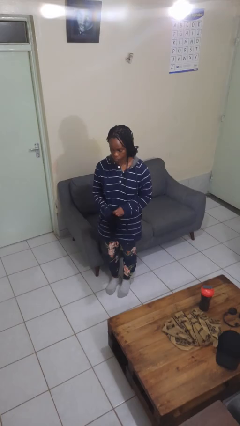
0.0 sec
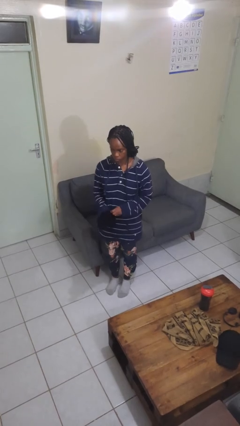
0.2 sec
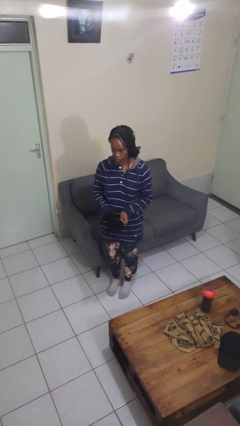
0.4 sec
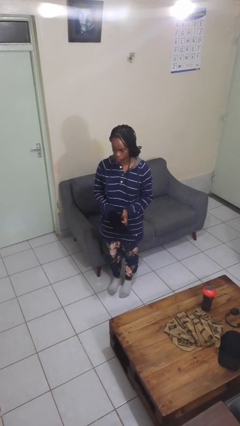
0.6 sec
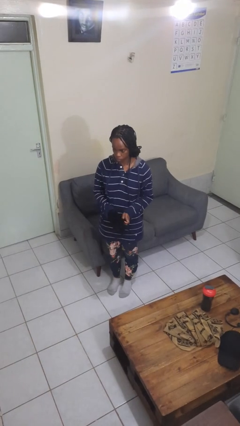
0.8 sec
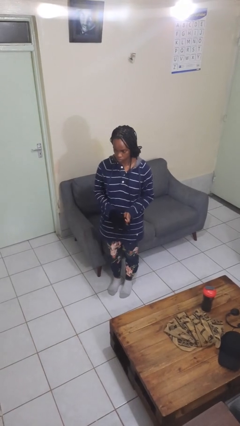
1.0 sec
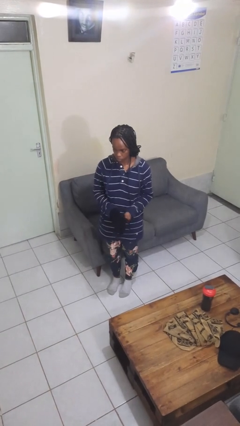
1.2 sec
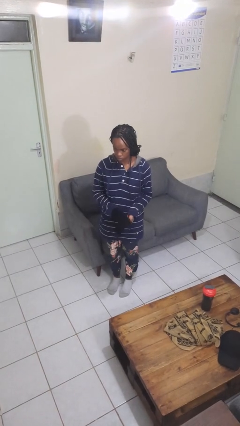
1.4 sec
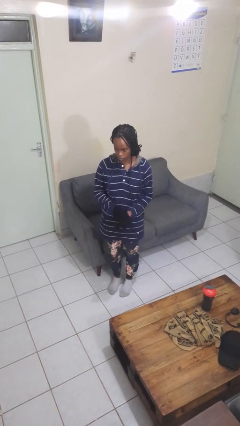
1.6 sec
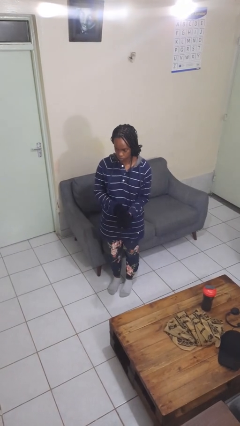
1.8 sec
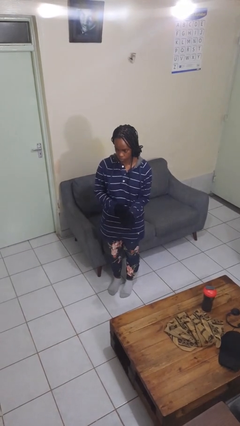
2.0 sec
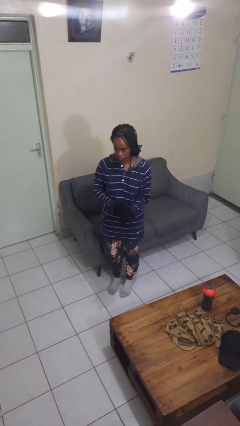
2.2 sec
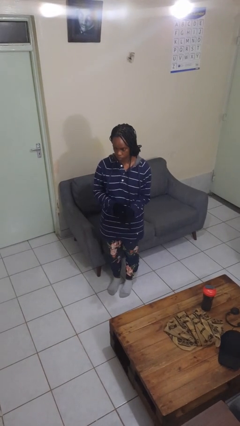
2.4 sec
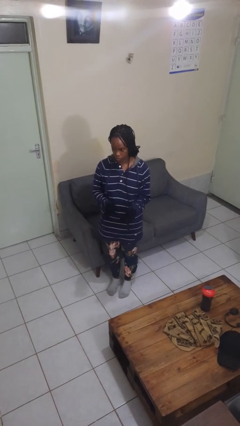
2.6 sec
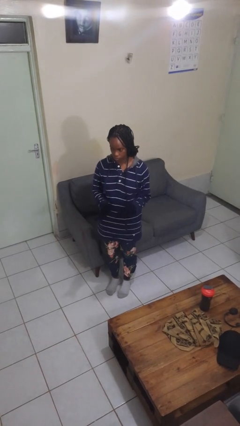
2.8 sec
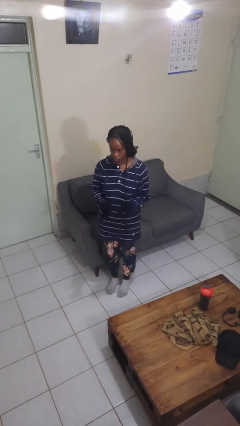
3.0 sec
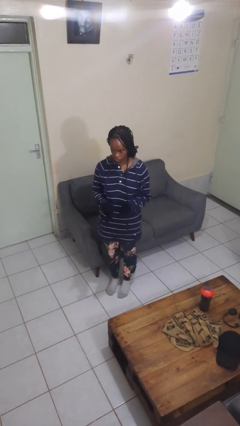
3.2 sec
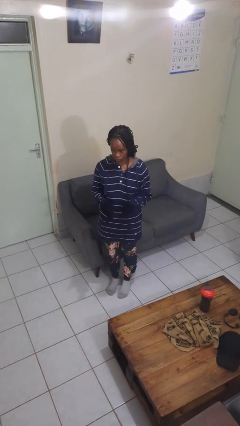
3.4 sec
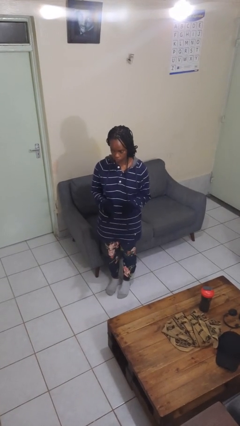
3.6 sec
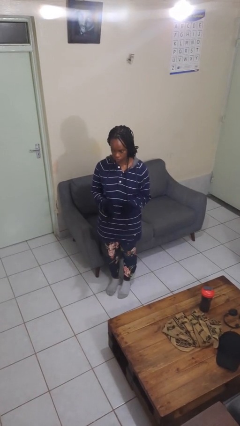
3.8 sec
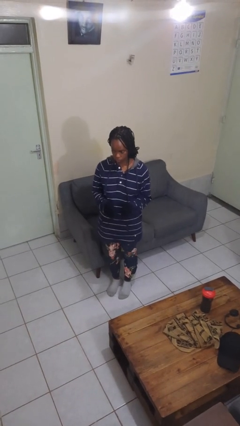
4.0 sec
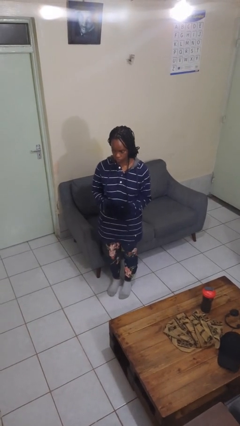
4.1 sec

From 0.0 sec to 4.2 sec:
person puts on gloves

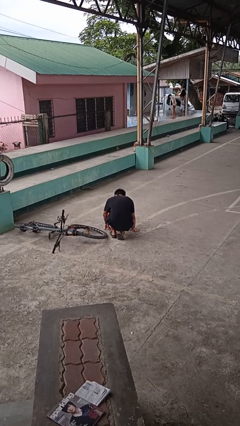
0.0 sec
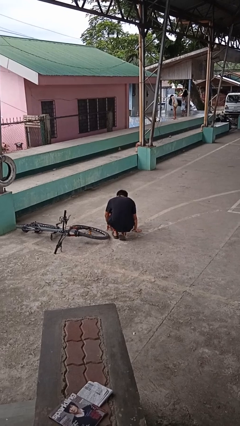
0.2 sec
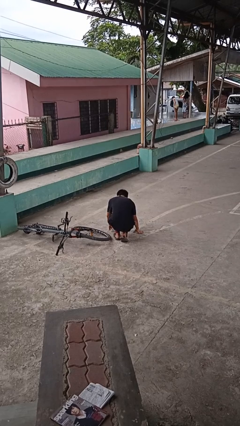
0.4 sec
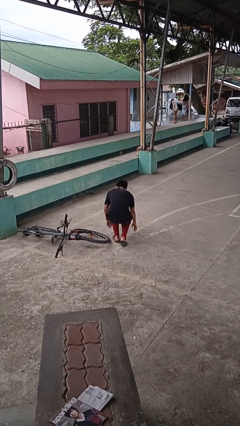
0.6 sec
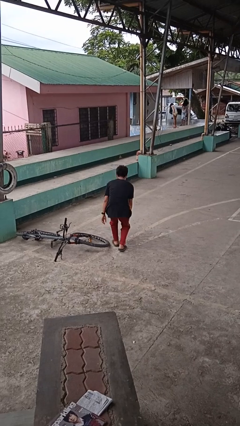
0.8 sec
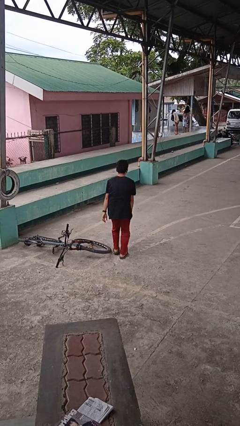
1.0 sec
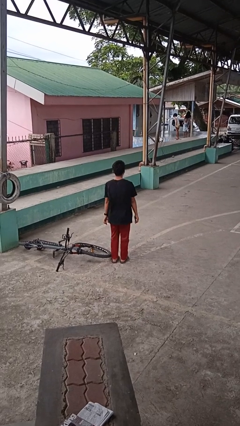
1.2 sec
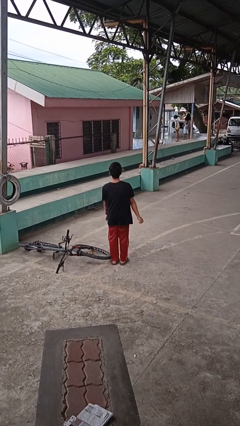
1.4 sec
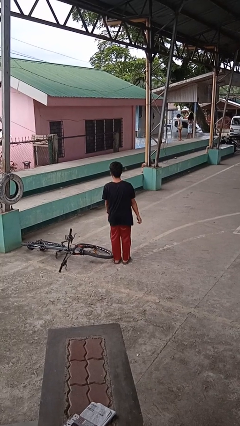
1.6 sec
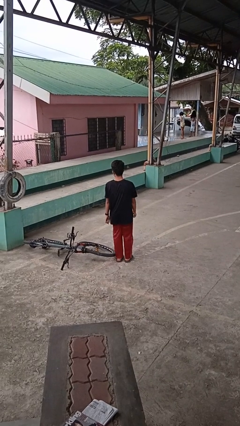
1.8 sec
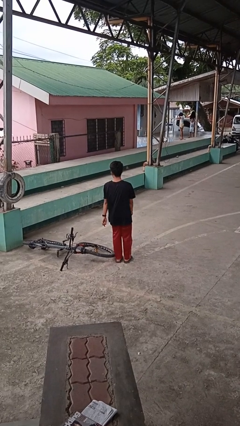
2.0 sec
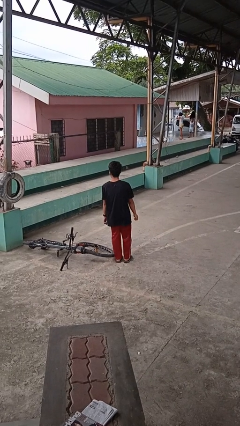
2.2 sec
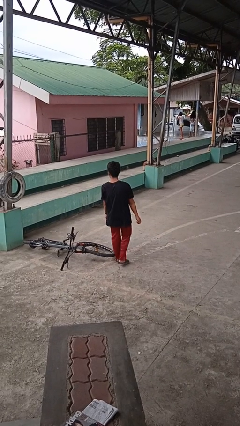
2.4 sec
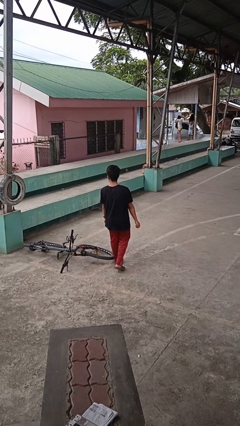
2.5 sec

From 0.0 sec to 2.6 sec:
person stands up from floor

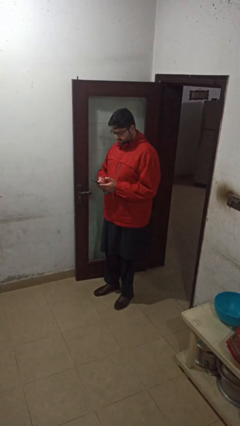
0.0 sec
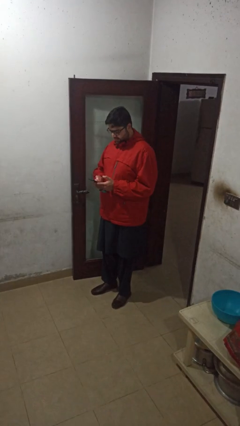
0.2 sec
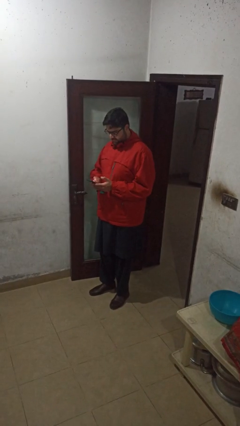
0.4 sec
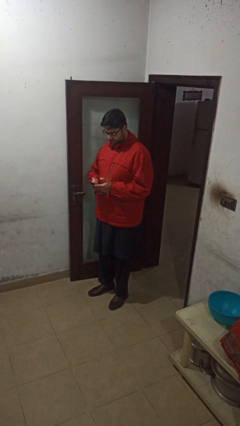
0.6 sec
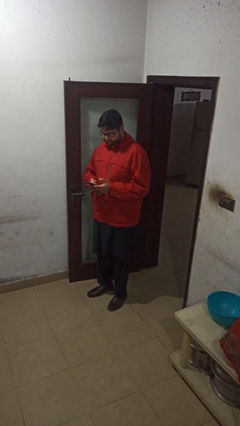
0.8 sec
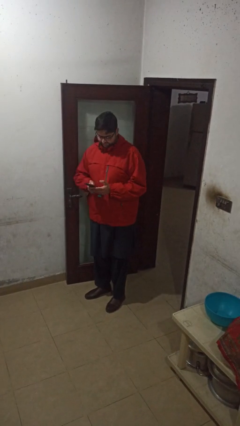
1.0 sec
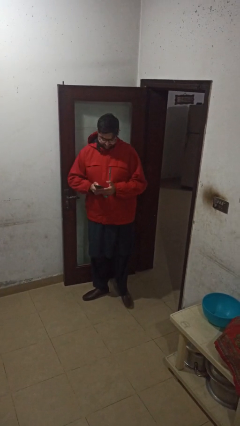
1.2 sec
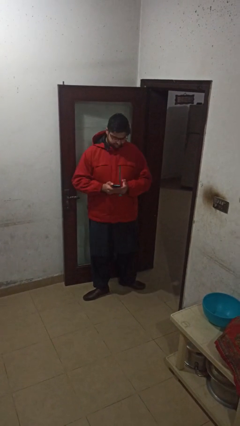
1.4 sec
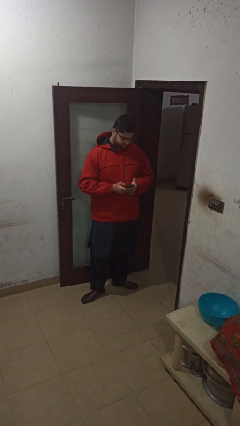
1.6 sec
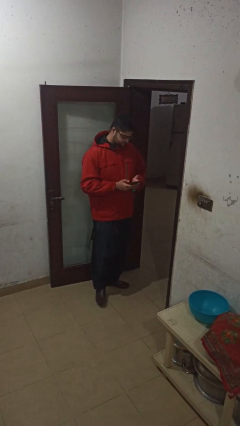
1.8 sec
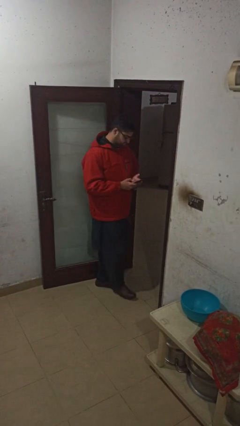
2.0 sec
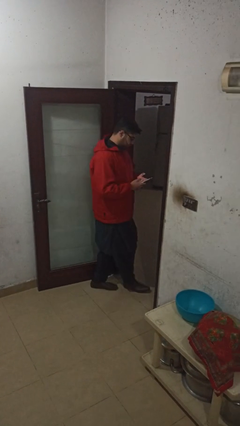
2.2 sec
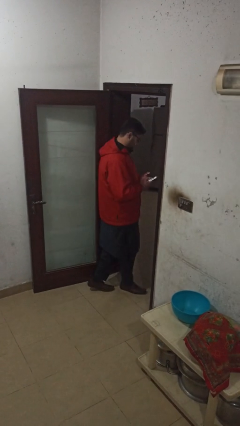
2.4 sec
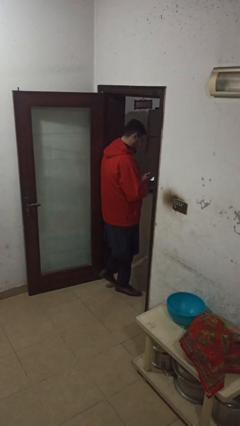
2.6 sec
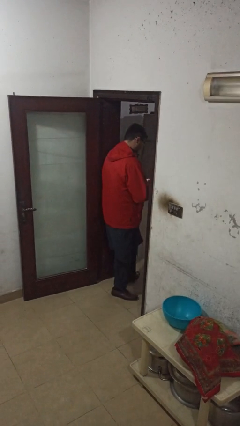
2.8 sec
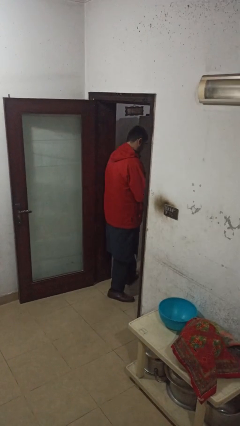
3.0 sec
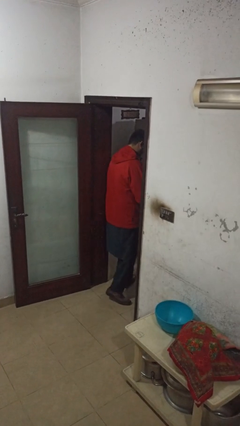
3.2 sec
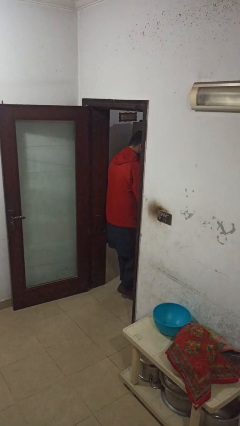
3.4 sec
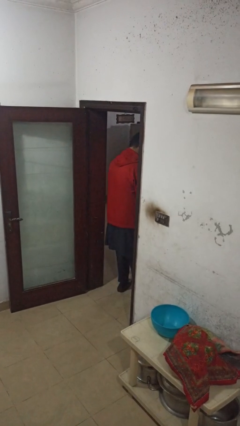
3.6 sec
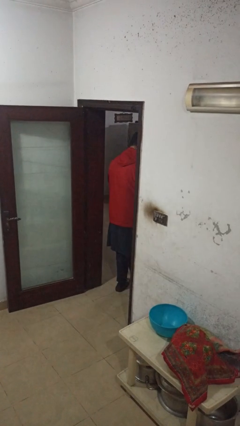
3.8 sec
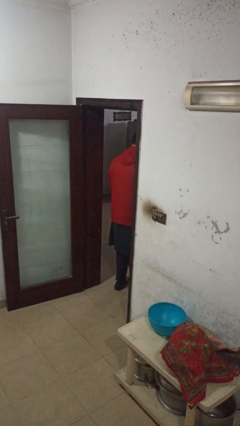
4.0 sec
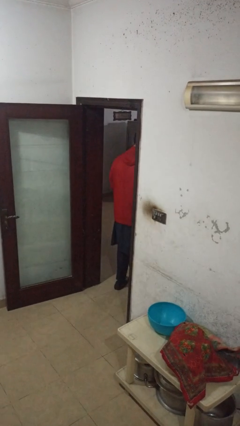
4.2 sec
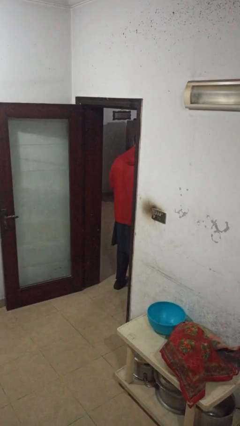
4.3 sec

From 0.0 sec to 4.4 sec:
person exits scene through structure

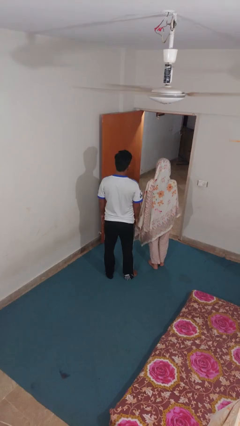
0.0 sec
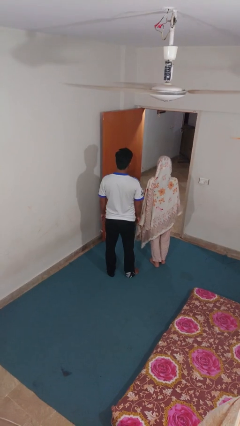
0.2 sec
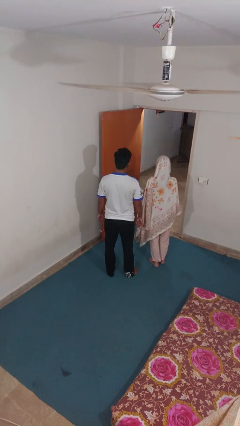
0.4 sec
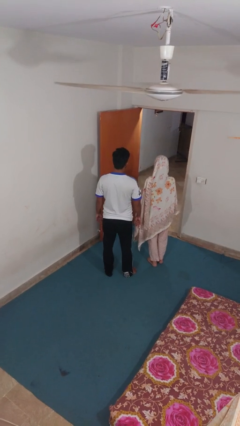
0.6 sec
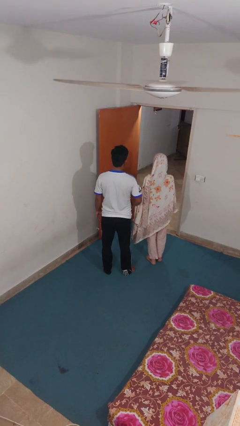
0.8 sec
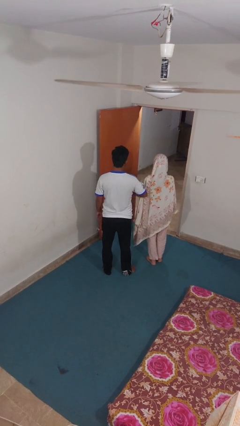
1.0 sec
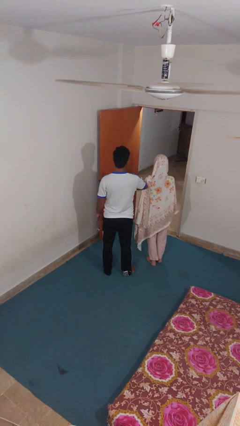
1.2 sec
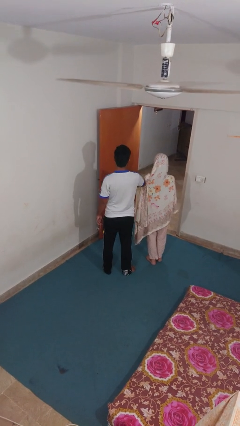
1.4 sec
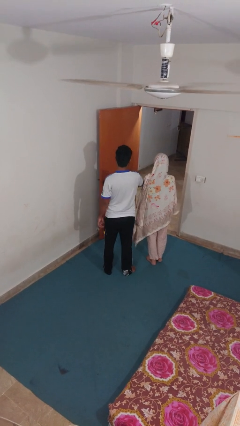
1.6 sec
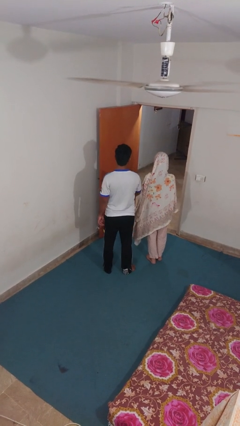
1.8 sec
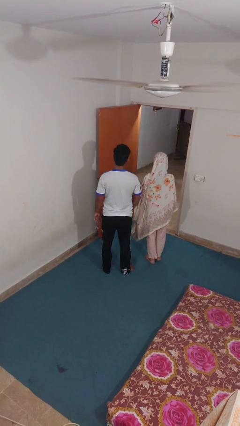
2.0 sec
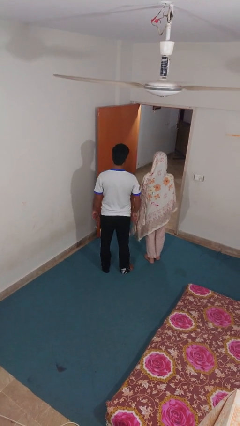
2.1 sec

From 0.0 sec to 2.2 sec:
person nudges person with elbow

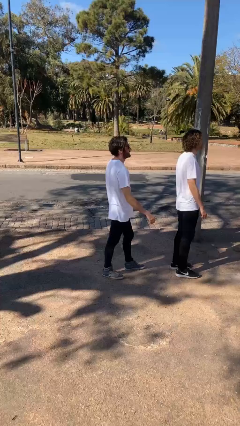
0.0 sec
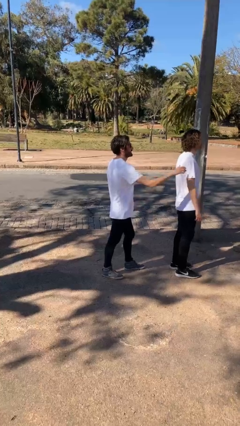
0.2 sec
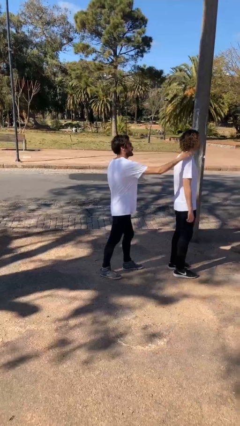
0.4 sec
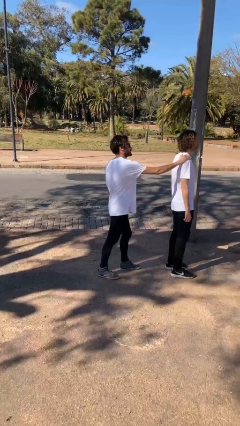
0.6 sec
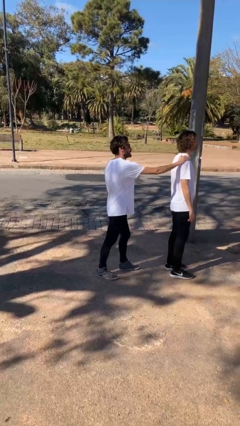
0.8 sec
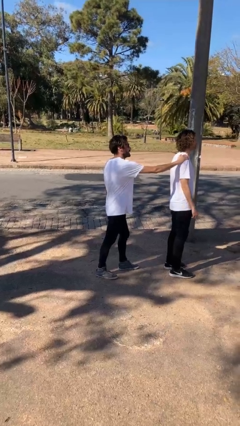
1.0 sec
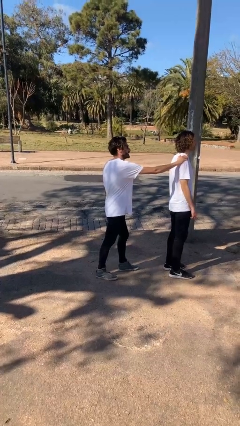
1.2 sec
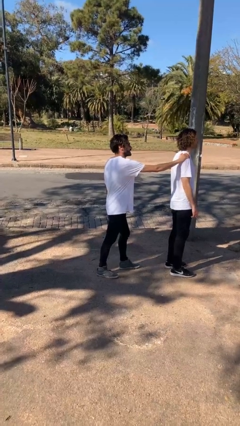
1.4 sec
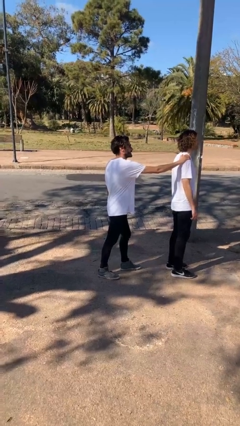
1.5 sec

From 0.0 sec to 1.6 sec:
person grabs person by shoulder

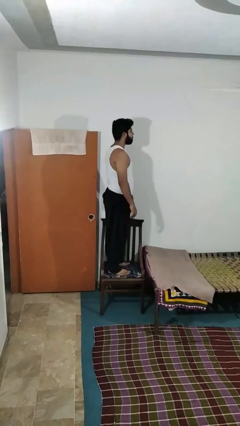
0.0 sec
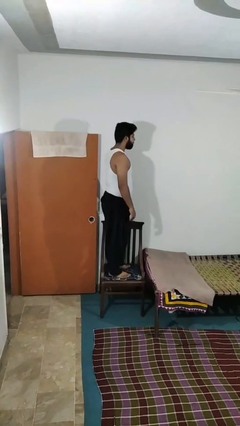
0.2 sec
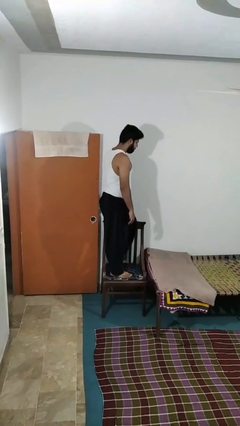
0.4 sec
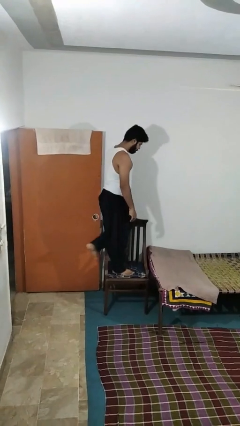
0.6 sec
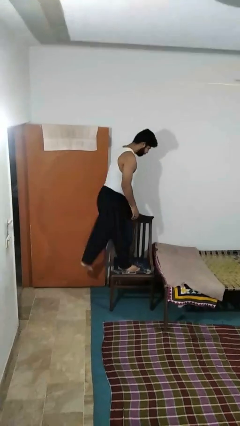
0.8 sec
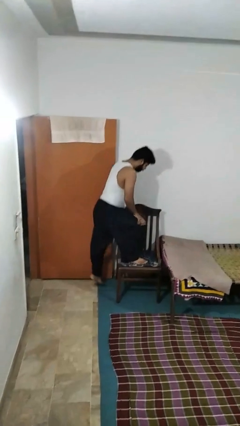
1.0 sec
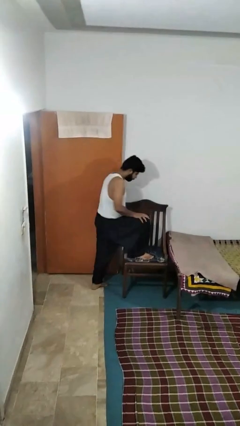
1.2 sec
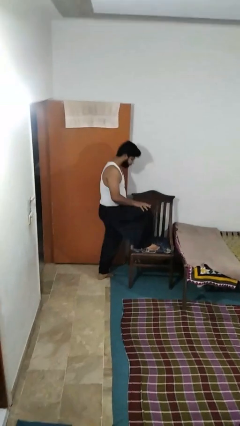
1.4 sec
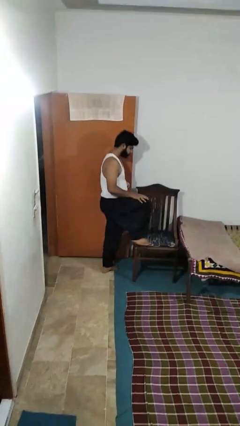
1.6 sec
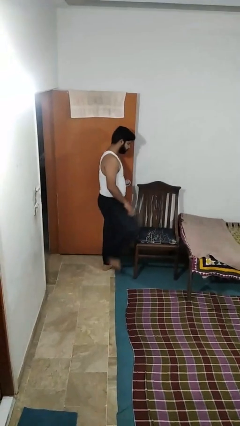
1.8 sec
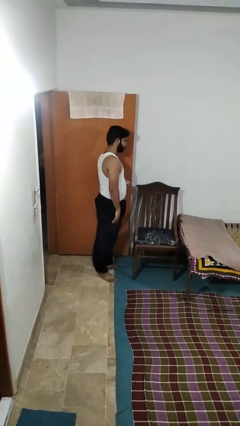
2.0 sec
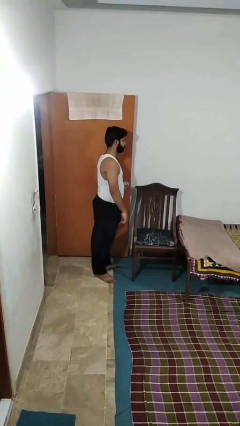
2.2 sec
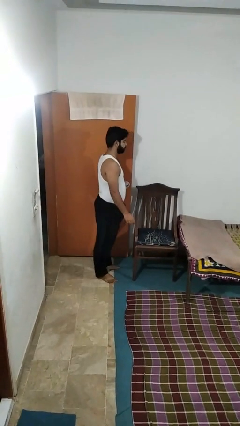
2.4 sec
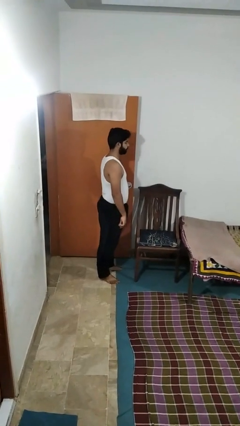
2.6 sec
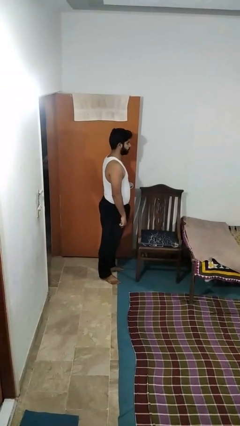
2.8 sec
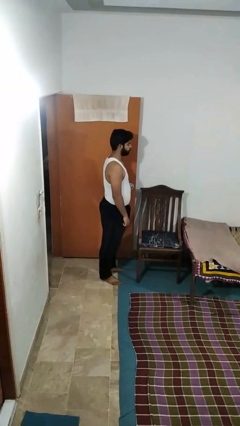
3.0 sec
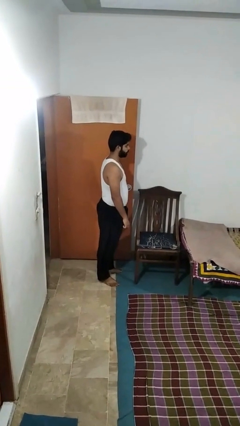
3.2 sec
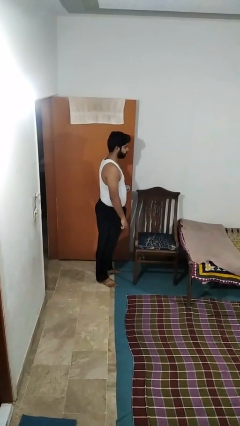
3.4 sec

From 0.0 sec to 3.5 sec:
person climbs off chair
